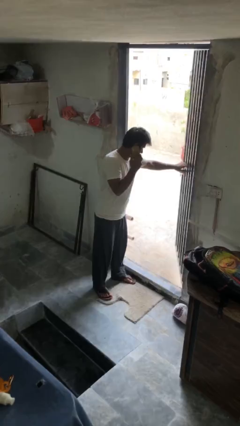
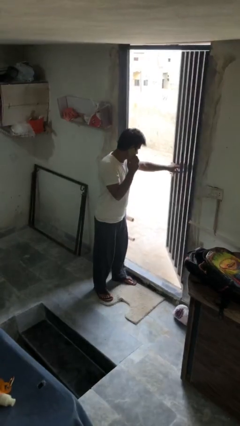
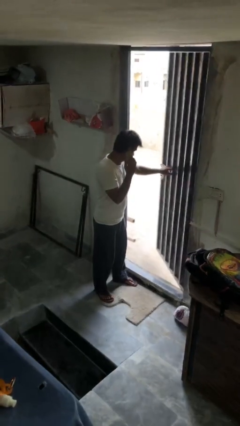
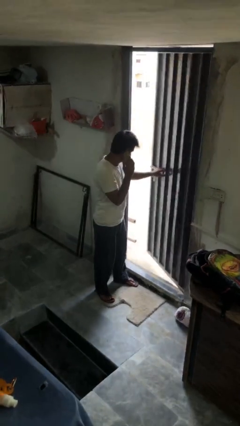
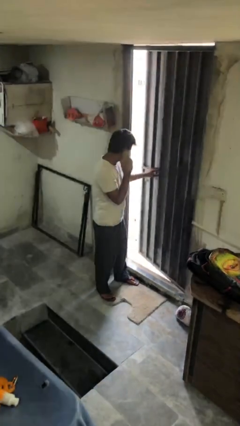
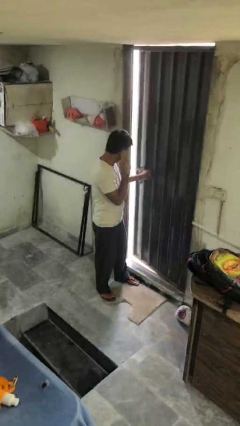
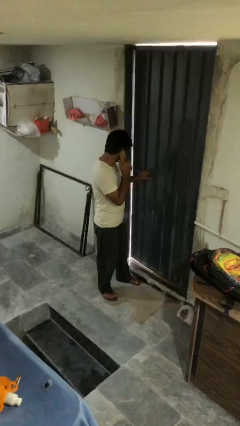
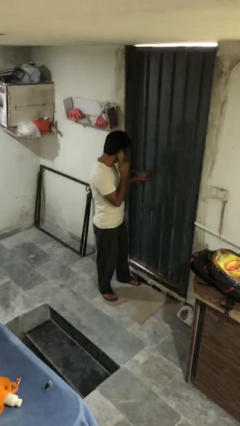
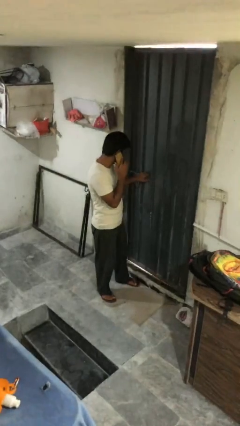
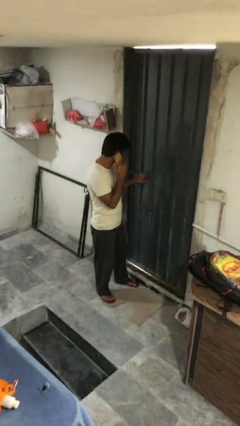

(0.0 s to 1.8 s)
person closes facility door

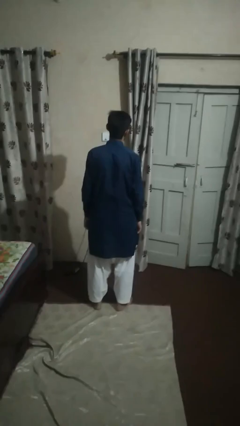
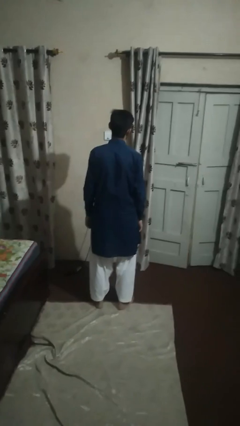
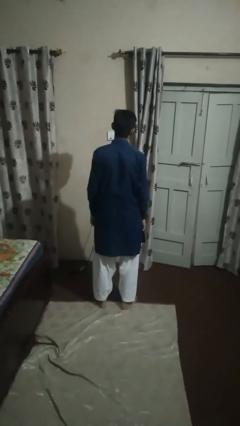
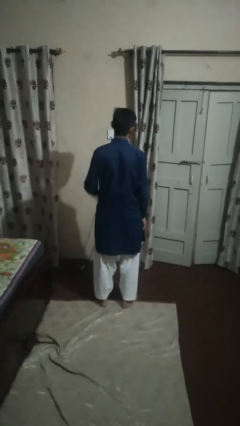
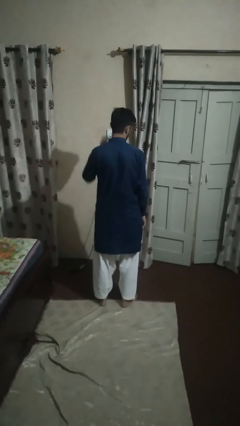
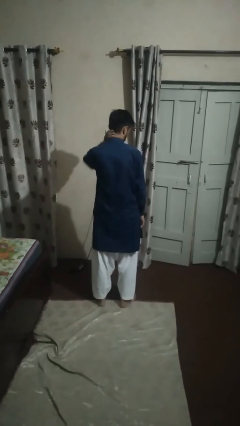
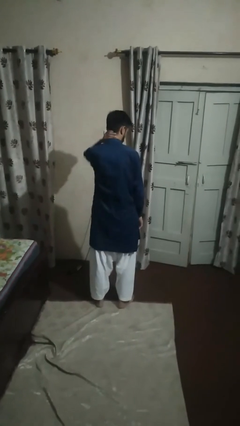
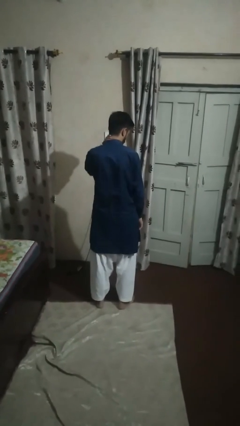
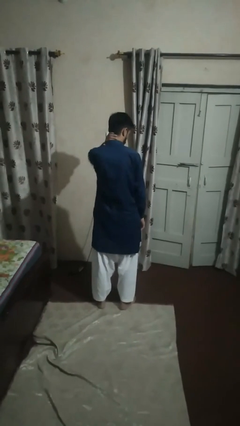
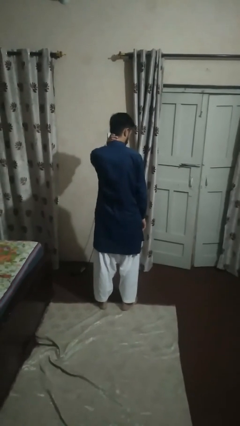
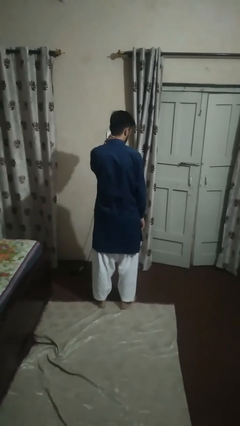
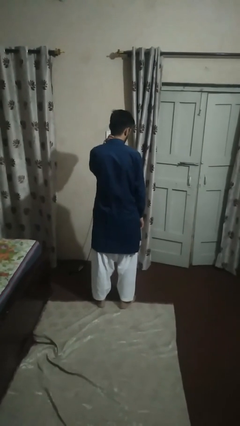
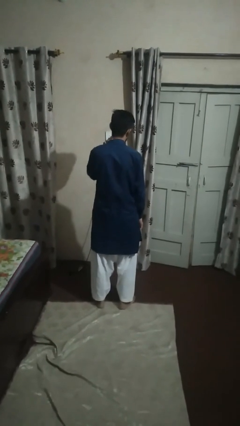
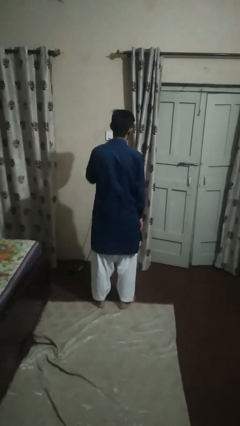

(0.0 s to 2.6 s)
person rubs neck

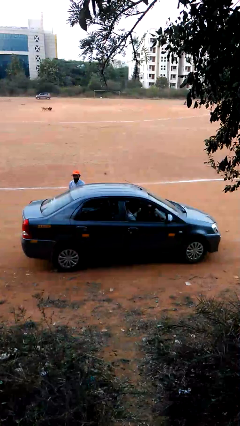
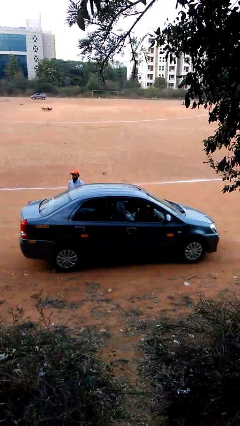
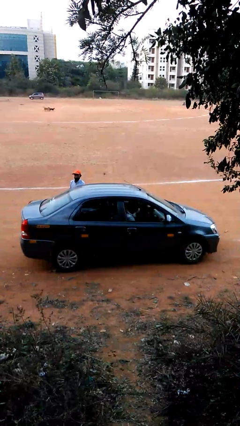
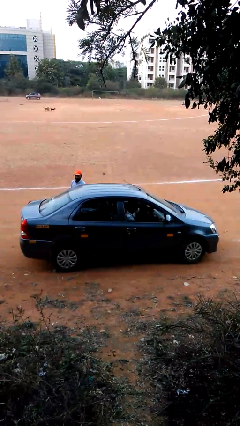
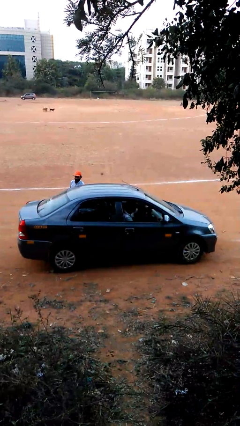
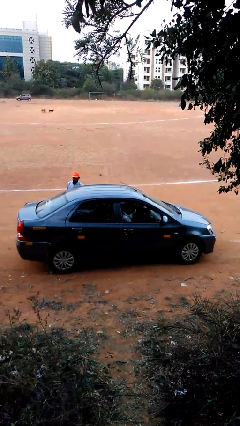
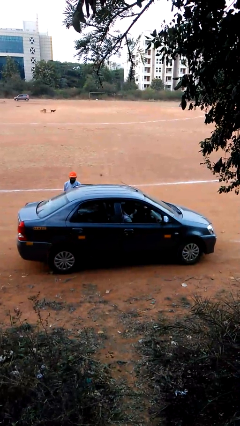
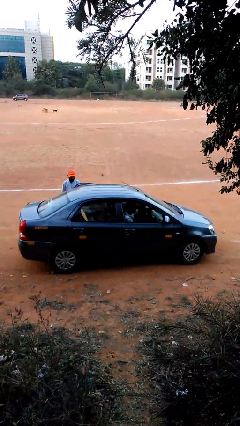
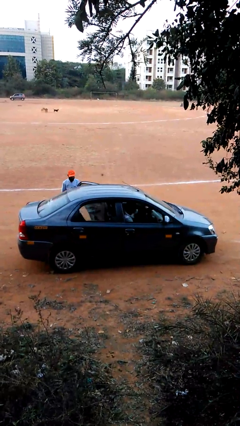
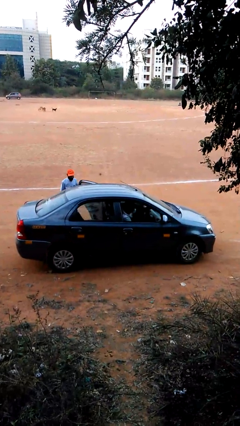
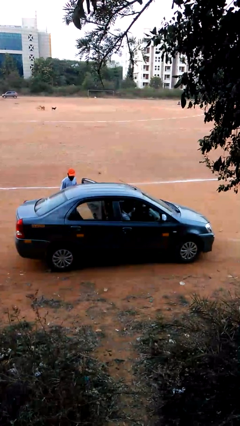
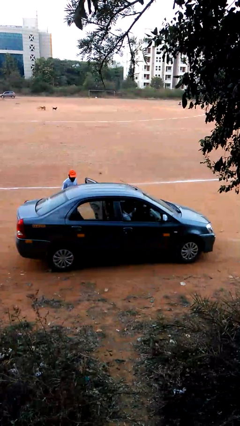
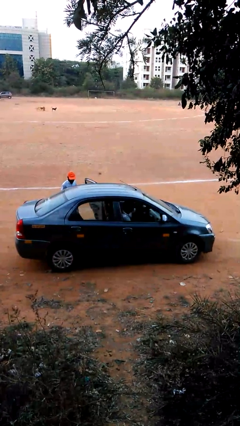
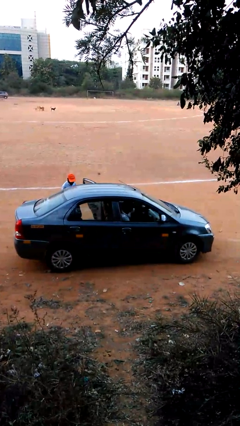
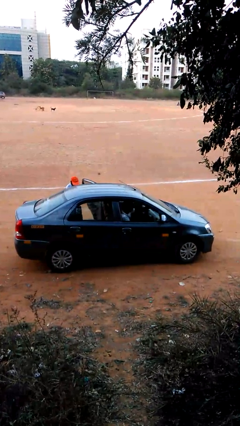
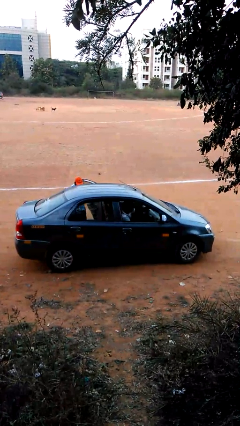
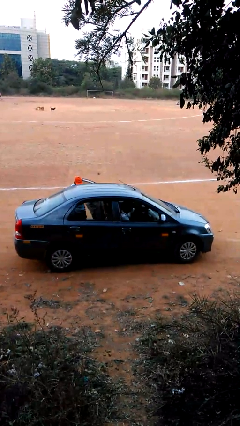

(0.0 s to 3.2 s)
car picks up person

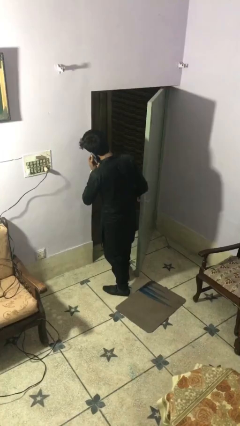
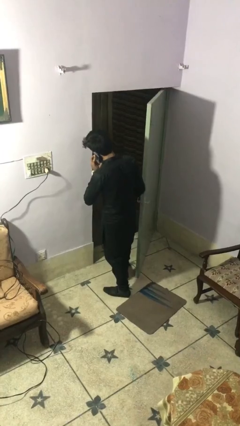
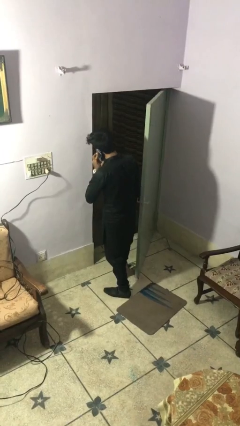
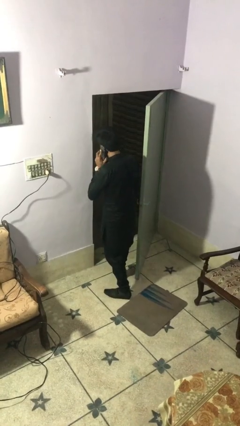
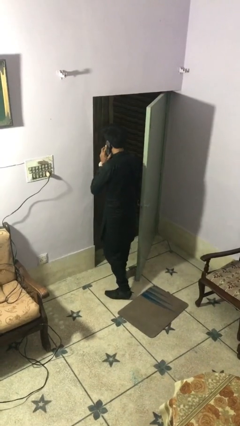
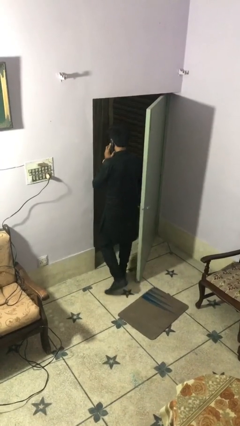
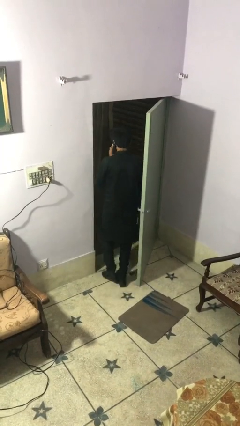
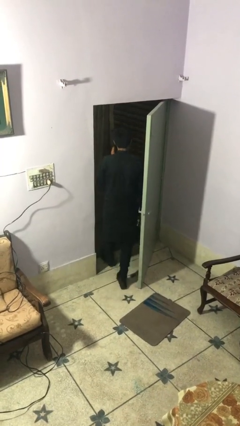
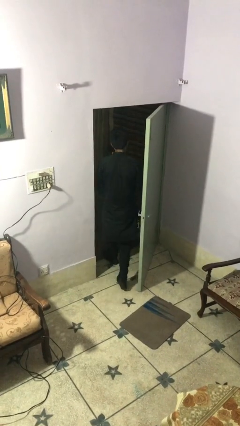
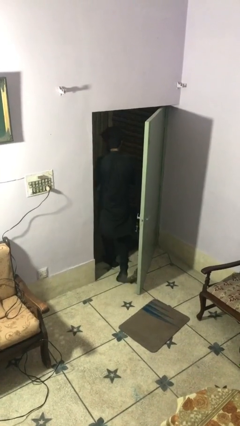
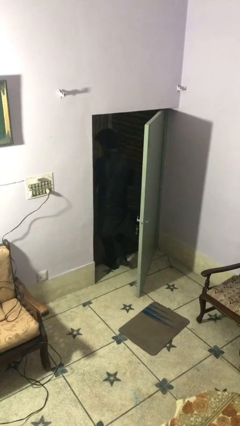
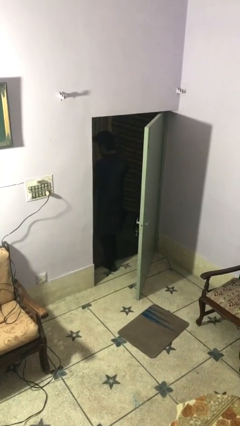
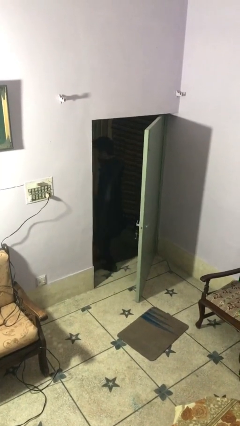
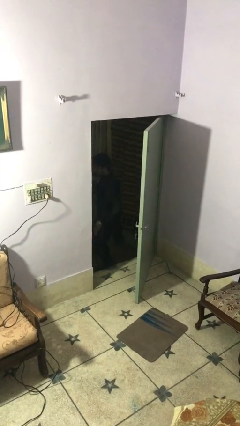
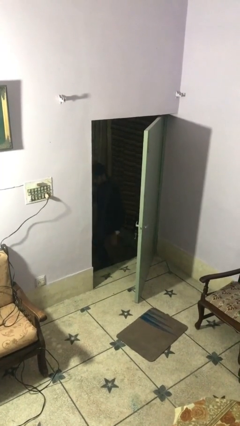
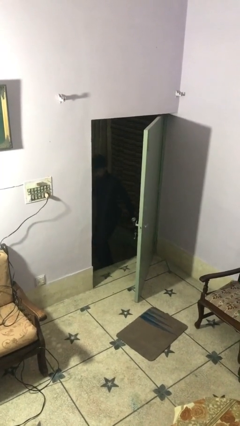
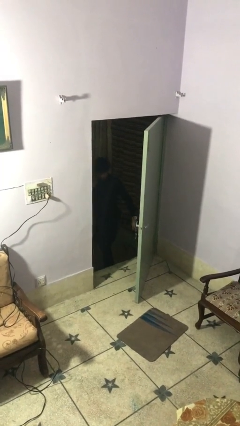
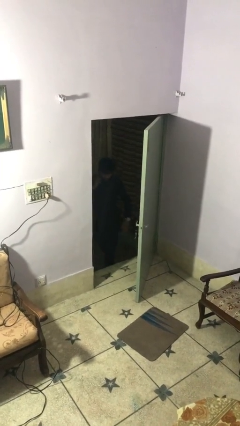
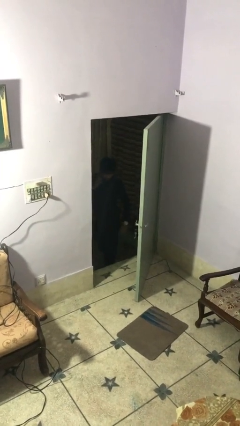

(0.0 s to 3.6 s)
person exits scene through structure

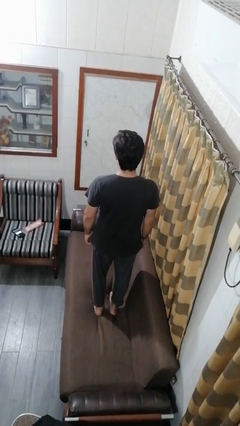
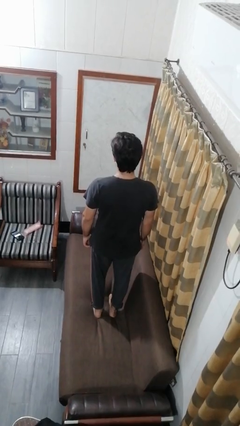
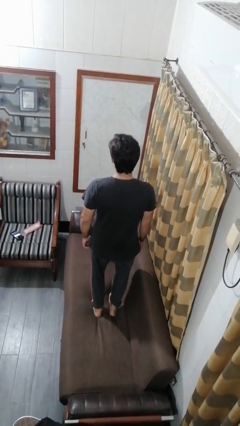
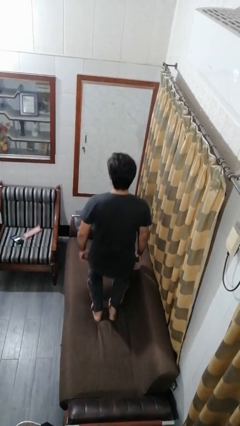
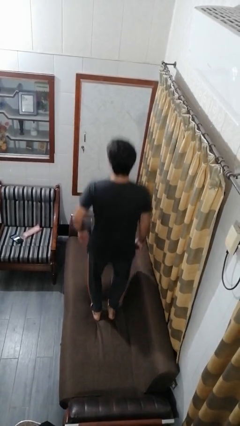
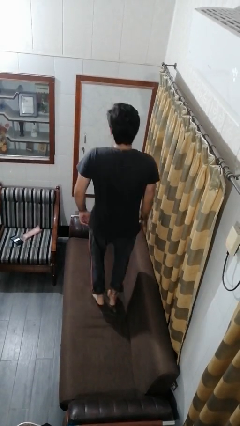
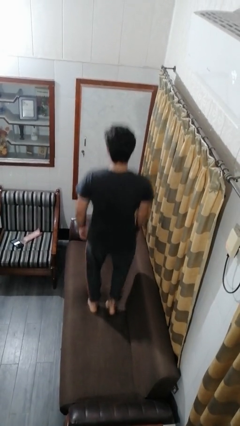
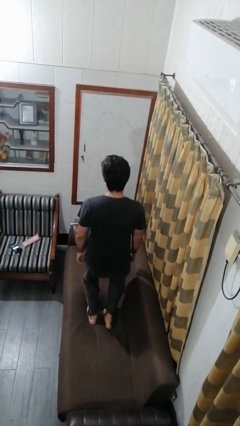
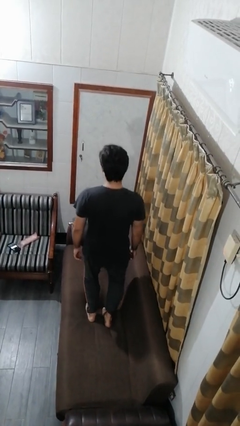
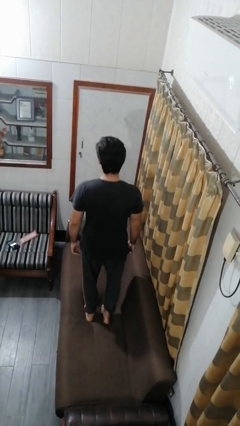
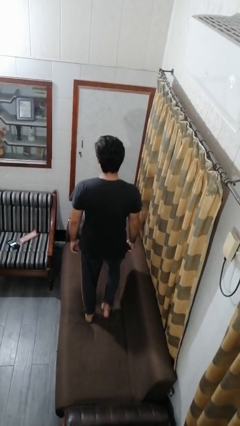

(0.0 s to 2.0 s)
person jumps on couch

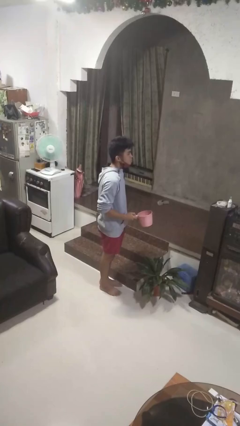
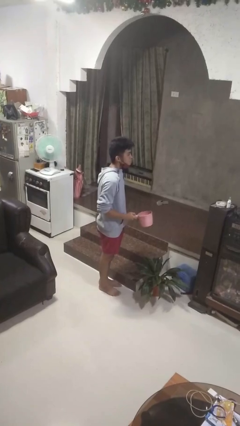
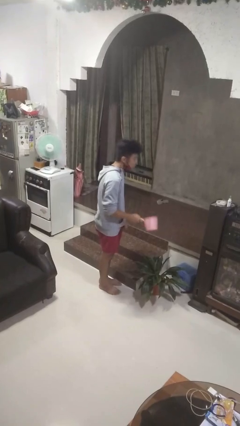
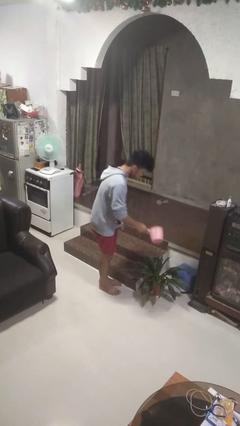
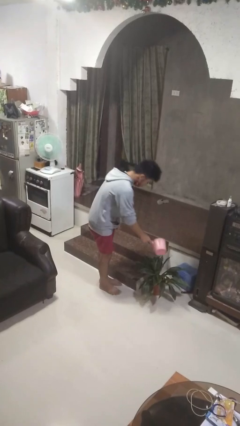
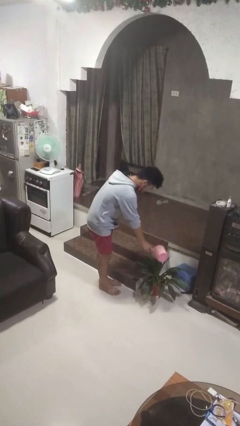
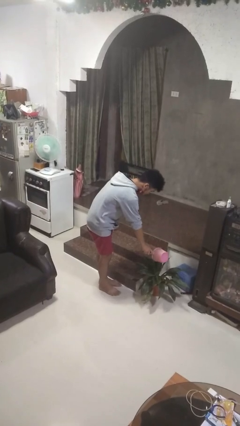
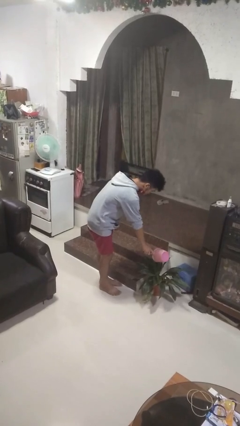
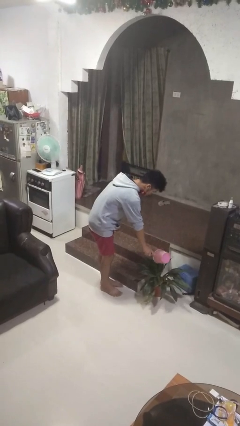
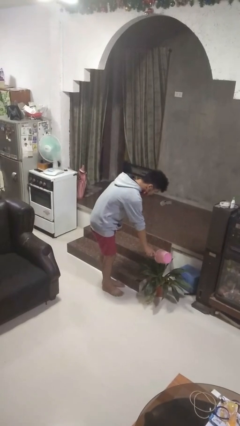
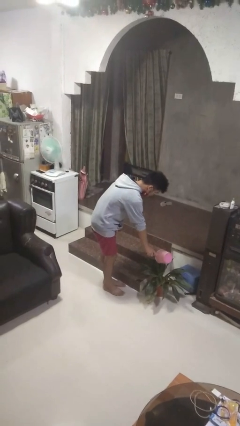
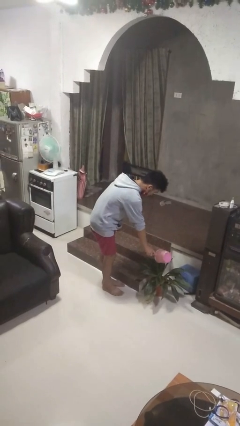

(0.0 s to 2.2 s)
person waters houseplant

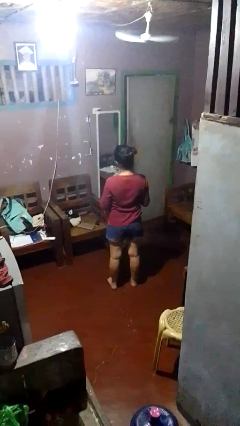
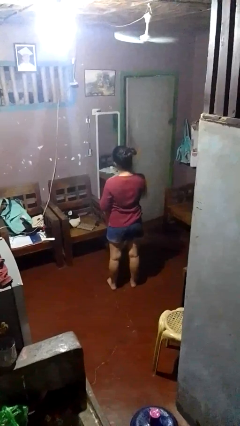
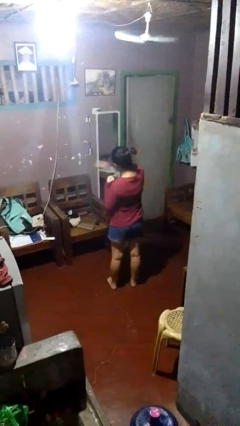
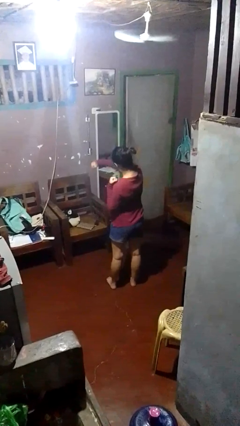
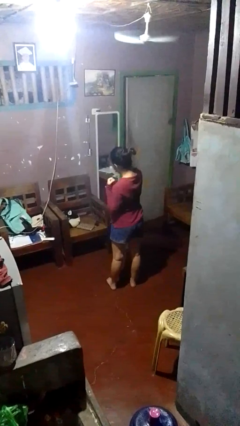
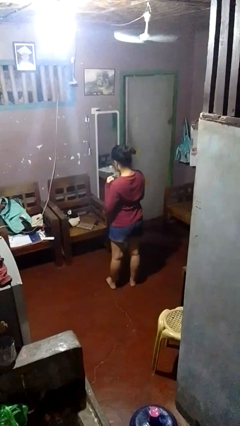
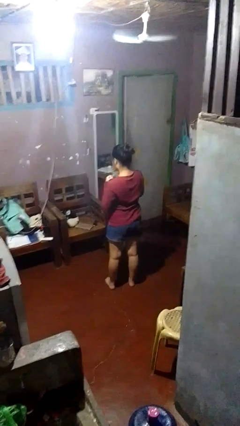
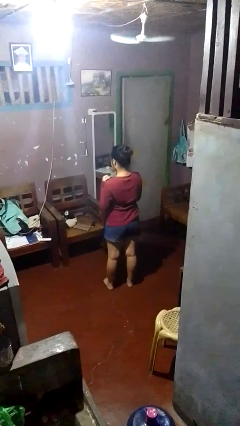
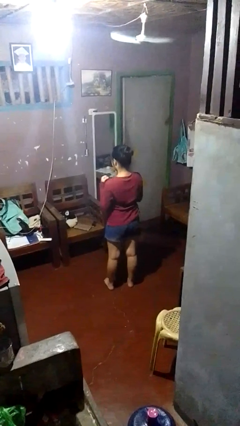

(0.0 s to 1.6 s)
person punches

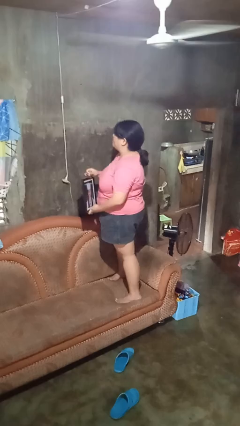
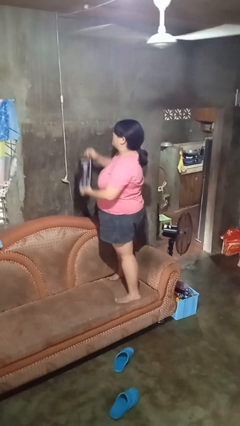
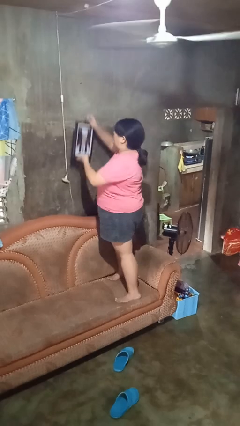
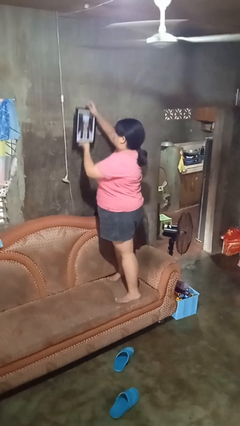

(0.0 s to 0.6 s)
person puts up picture frame
